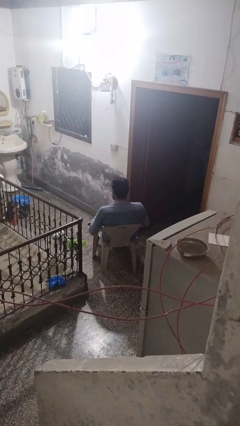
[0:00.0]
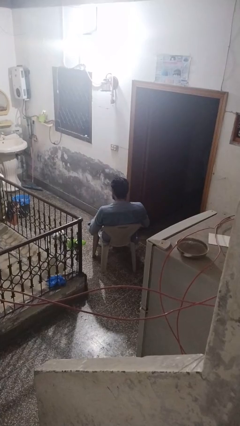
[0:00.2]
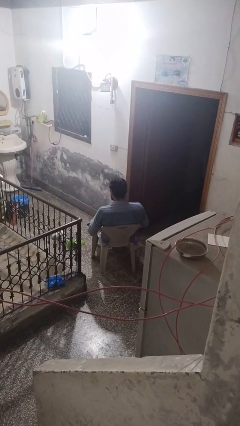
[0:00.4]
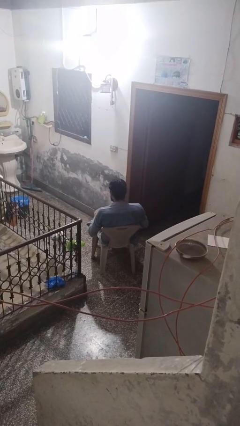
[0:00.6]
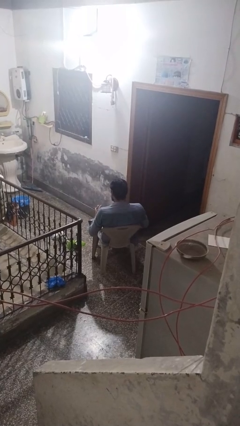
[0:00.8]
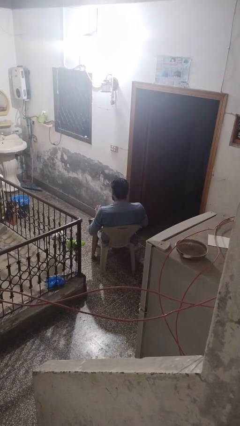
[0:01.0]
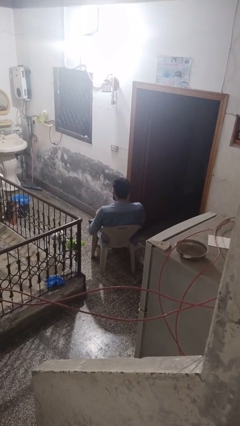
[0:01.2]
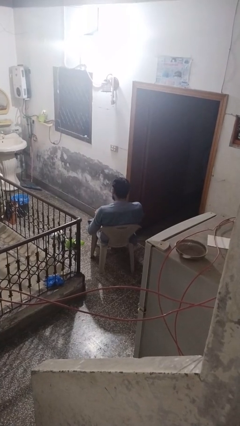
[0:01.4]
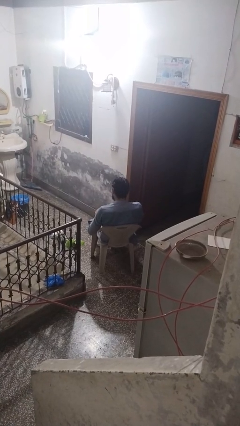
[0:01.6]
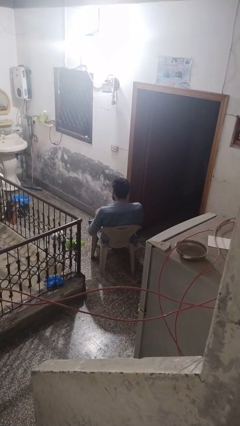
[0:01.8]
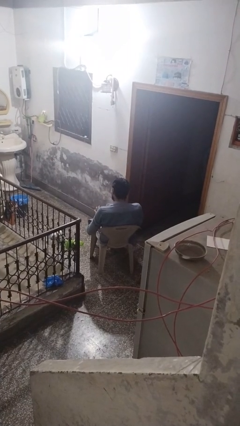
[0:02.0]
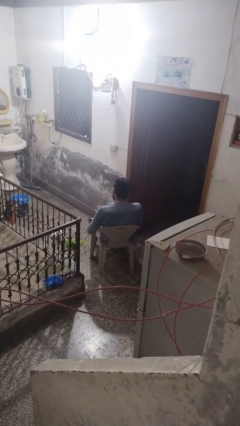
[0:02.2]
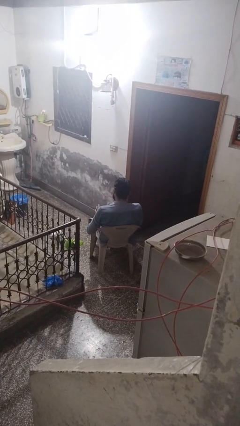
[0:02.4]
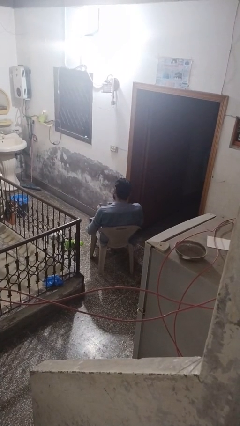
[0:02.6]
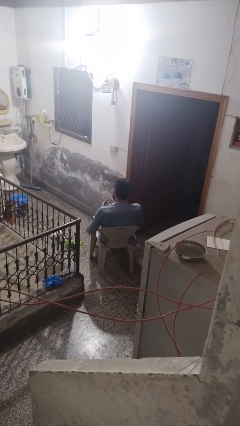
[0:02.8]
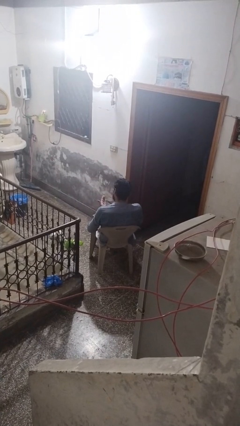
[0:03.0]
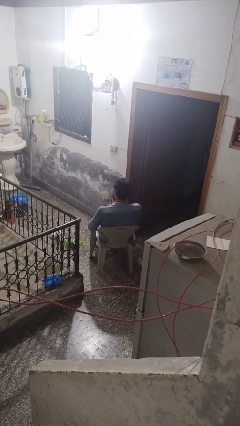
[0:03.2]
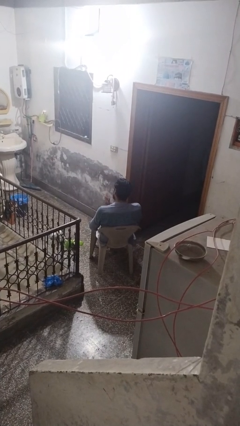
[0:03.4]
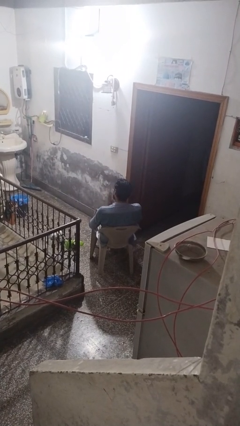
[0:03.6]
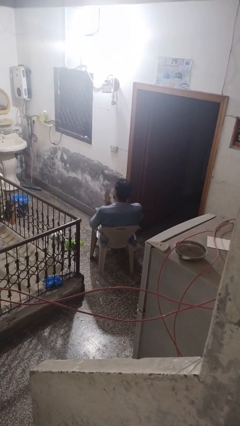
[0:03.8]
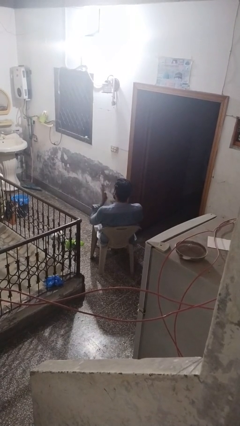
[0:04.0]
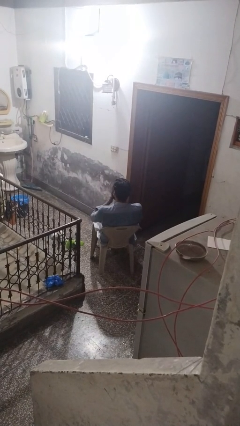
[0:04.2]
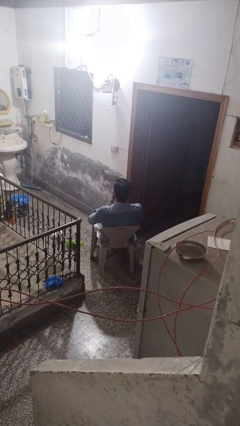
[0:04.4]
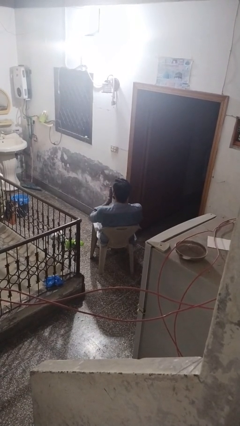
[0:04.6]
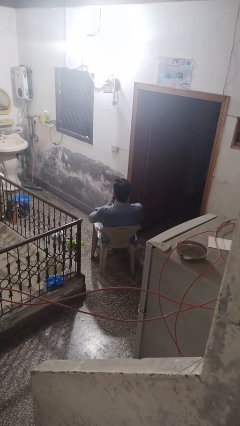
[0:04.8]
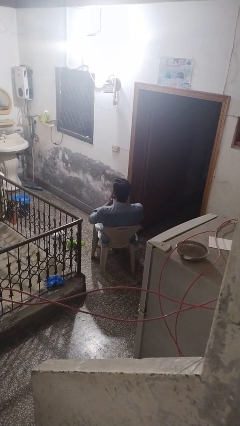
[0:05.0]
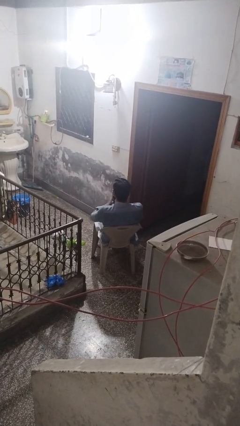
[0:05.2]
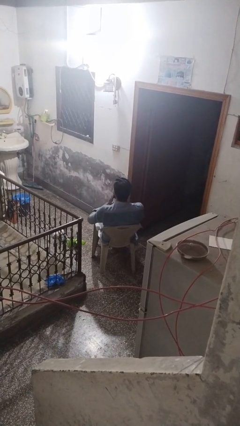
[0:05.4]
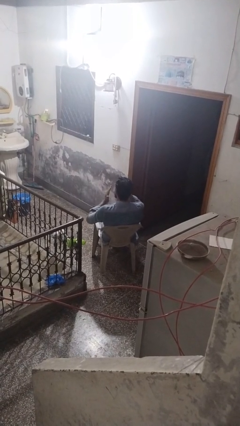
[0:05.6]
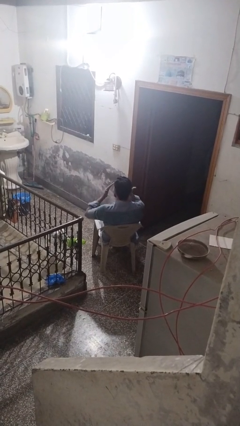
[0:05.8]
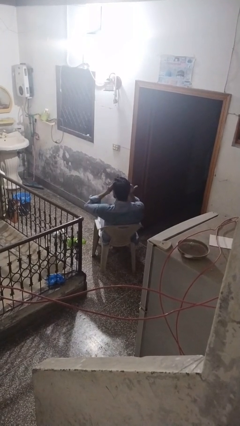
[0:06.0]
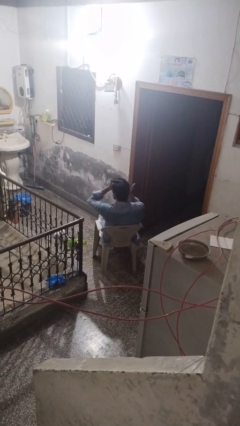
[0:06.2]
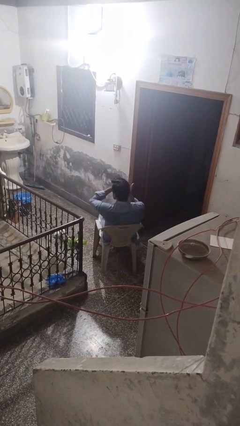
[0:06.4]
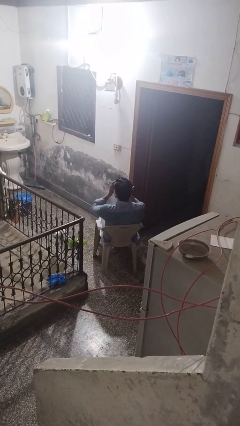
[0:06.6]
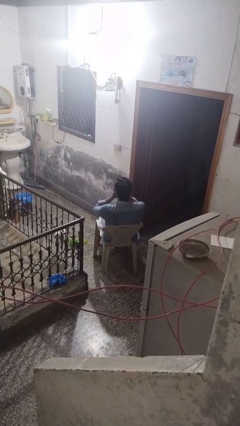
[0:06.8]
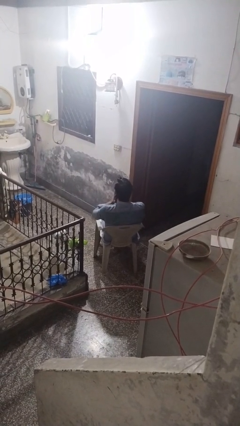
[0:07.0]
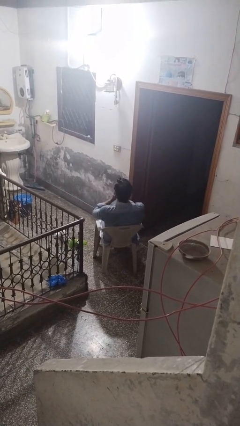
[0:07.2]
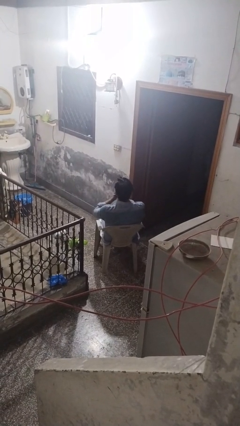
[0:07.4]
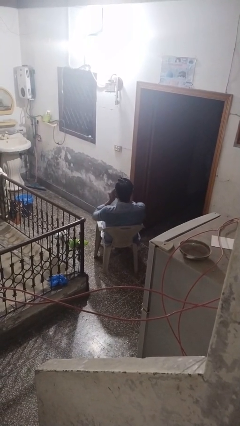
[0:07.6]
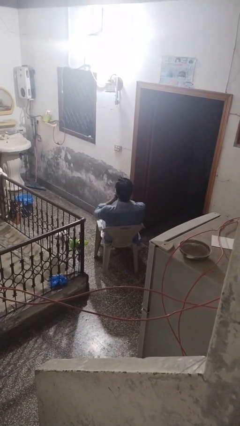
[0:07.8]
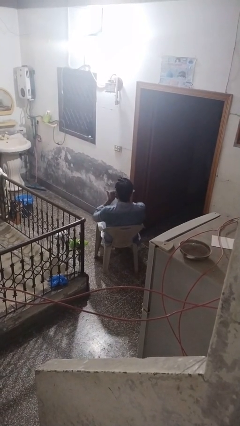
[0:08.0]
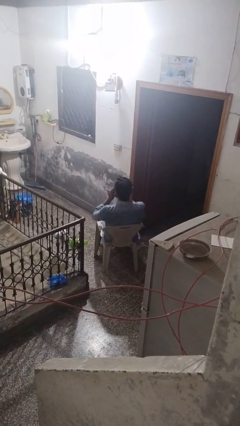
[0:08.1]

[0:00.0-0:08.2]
person applies facial moisturizer

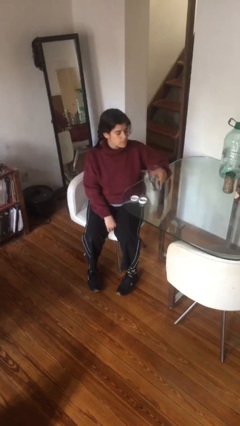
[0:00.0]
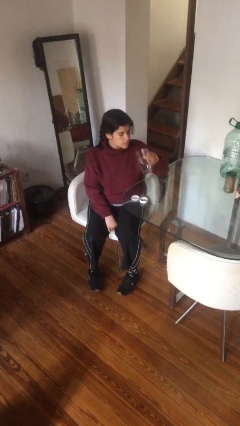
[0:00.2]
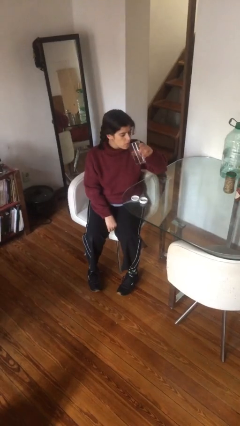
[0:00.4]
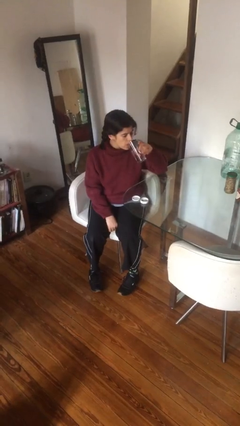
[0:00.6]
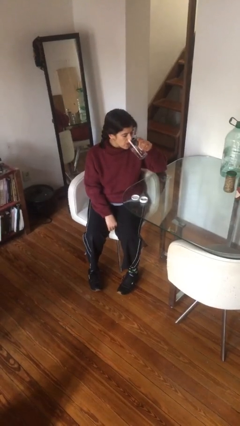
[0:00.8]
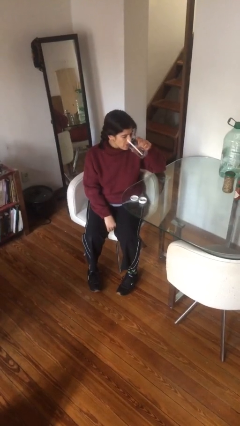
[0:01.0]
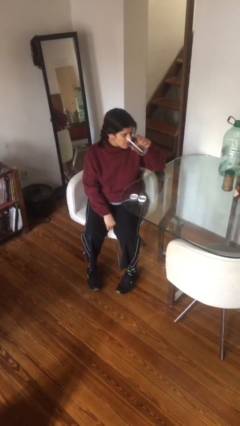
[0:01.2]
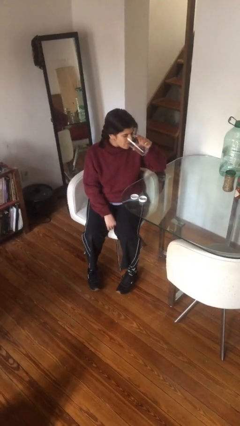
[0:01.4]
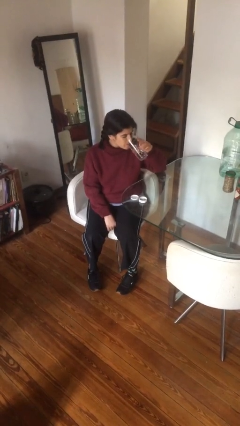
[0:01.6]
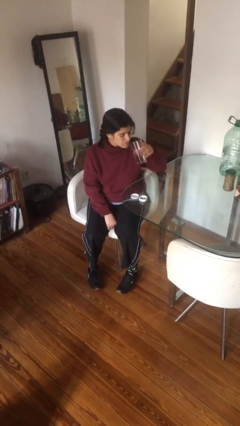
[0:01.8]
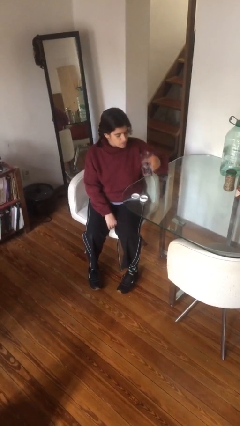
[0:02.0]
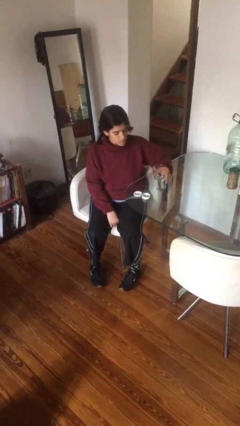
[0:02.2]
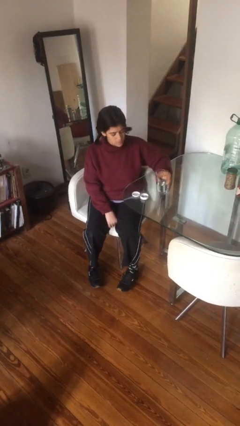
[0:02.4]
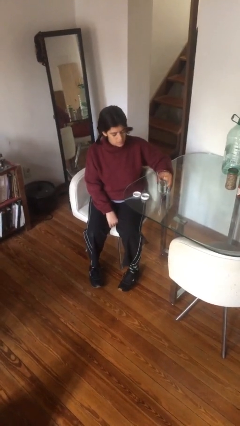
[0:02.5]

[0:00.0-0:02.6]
person drinks from cup

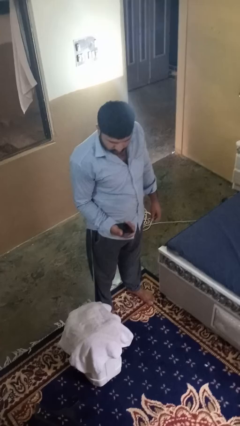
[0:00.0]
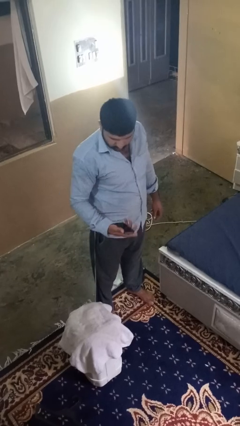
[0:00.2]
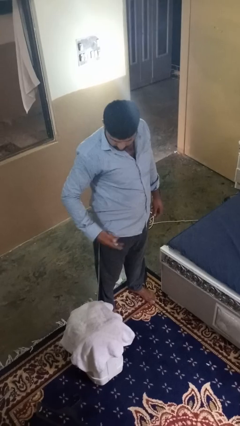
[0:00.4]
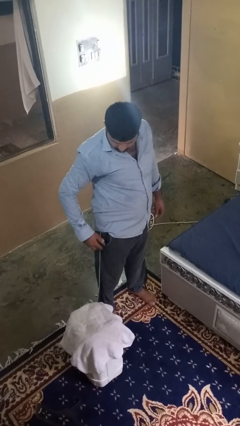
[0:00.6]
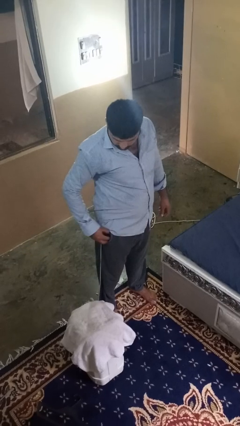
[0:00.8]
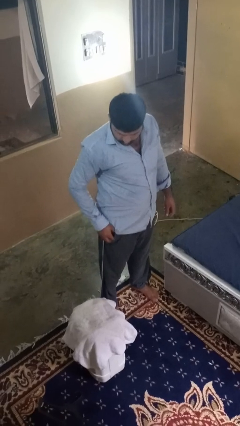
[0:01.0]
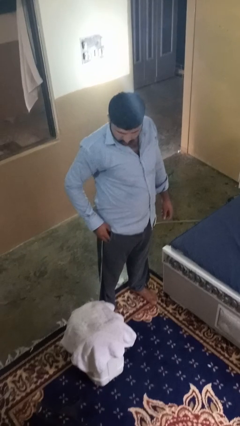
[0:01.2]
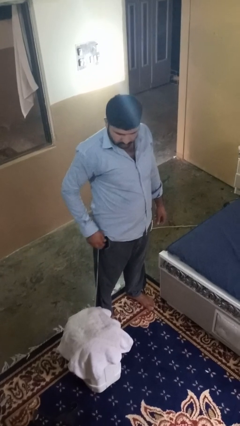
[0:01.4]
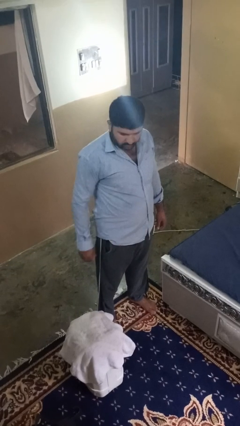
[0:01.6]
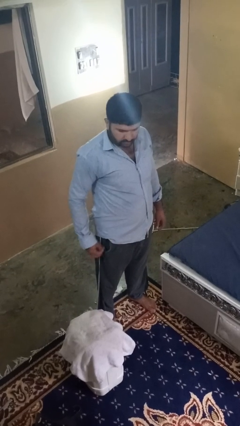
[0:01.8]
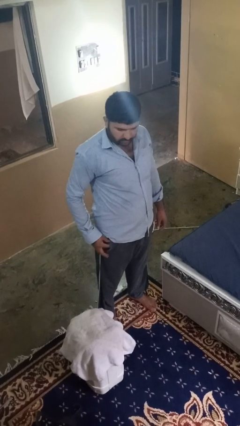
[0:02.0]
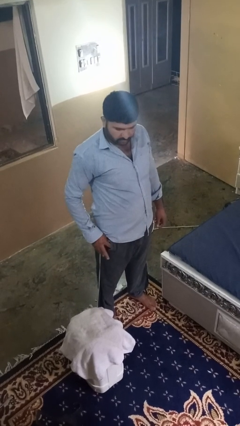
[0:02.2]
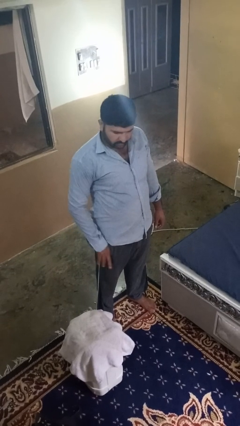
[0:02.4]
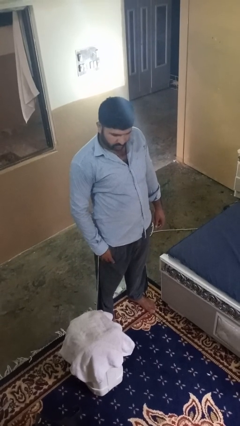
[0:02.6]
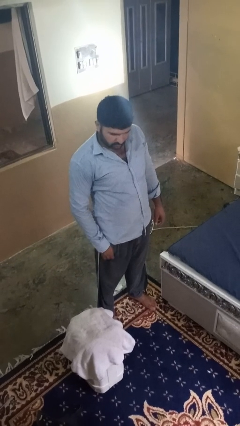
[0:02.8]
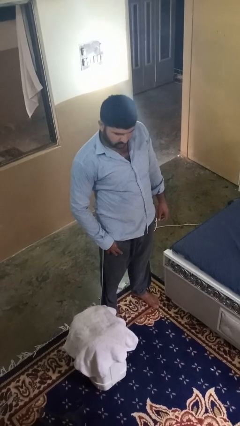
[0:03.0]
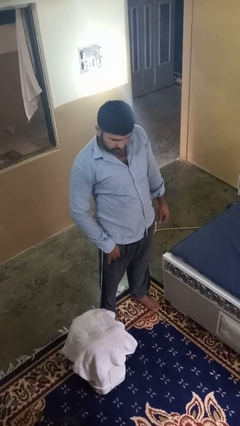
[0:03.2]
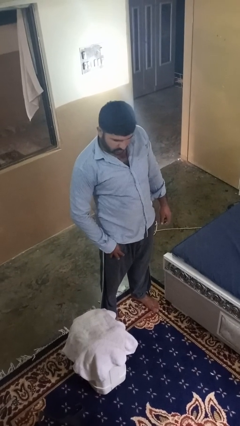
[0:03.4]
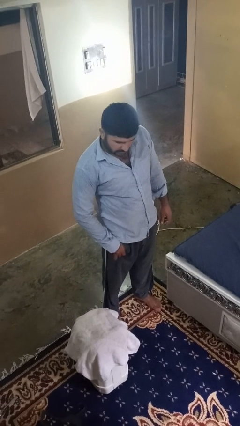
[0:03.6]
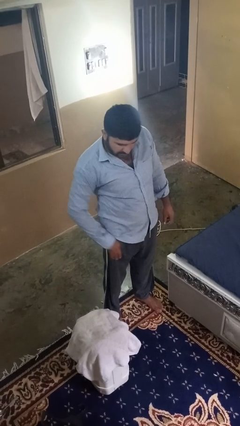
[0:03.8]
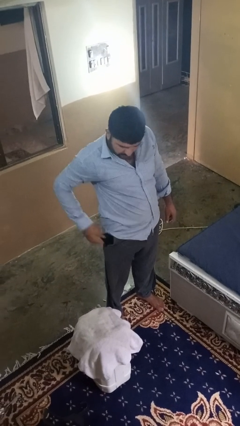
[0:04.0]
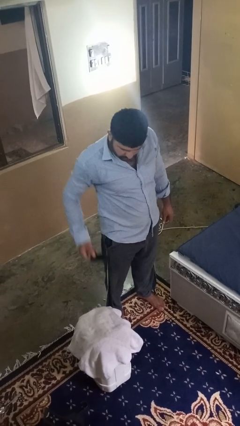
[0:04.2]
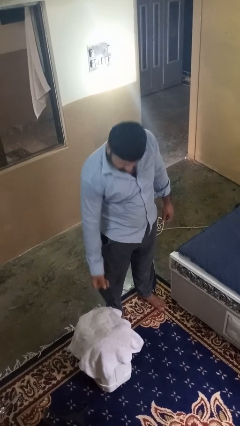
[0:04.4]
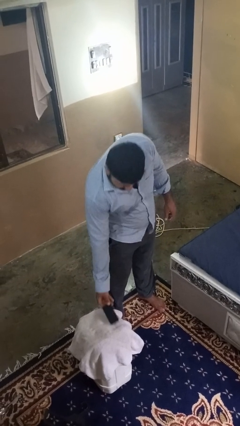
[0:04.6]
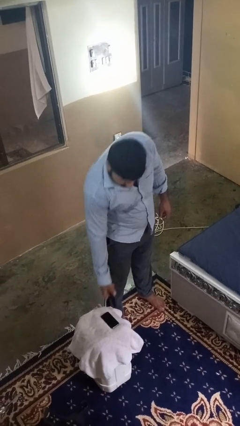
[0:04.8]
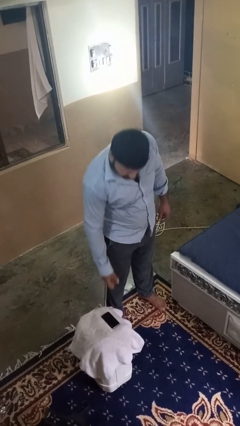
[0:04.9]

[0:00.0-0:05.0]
person puts phone into pocket

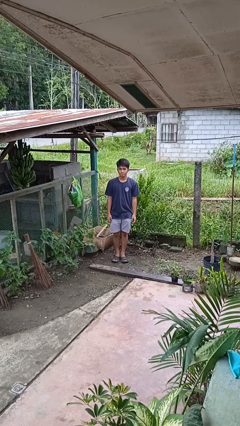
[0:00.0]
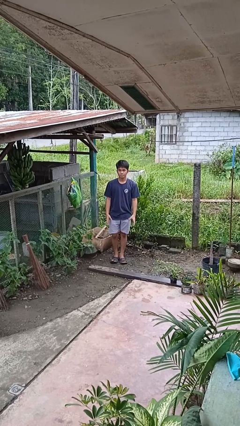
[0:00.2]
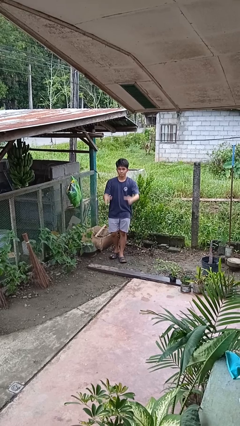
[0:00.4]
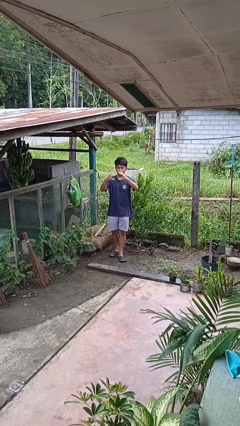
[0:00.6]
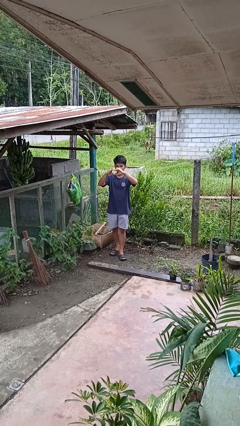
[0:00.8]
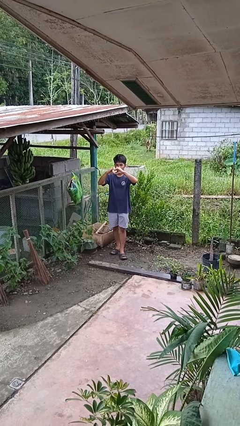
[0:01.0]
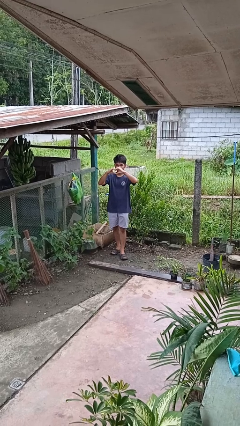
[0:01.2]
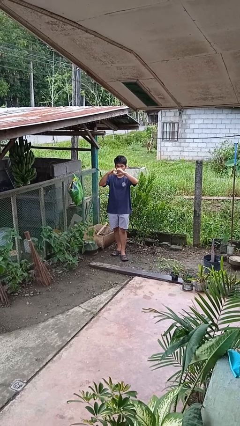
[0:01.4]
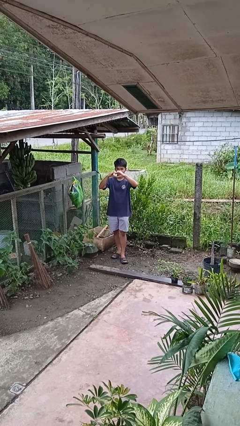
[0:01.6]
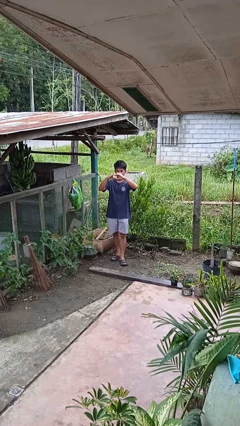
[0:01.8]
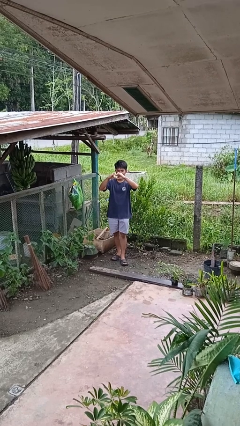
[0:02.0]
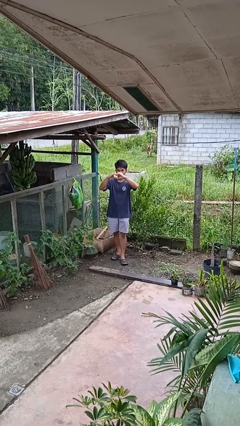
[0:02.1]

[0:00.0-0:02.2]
person gestures heart

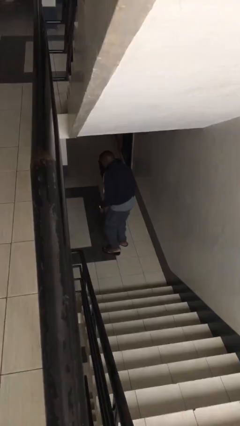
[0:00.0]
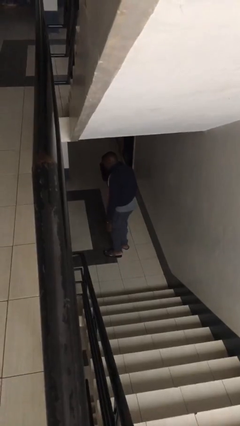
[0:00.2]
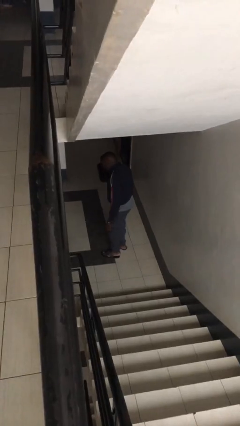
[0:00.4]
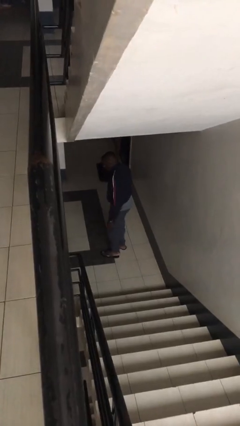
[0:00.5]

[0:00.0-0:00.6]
person climbs up stairs
